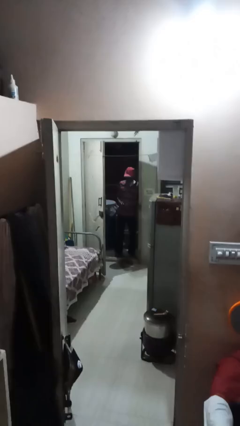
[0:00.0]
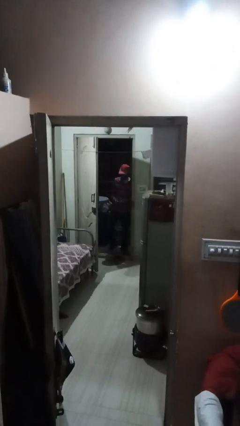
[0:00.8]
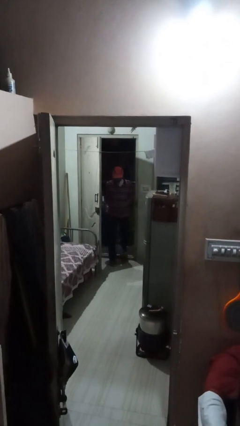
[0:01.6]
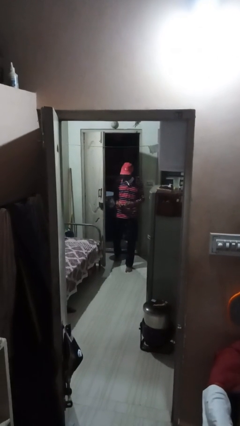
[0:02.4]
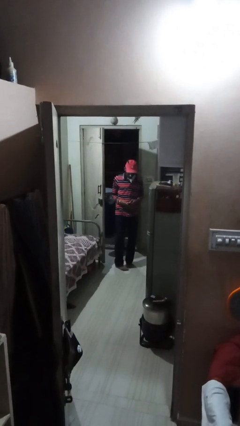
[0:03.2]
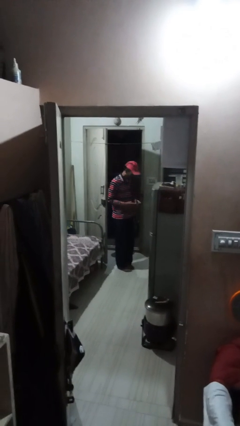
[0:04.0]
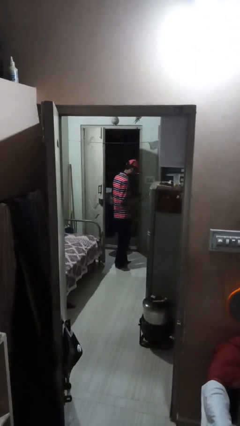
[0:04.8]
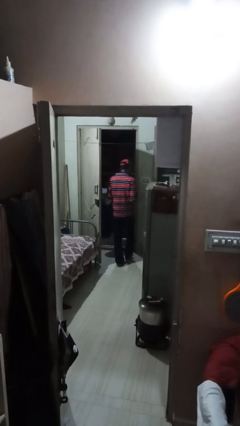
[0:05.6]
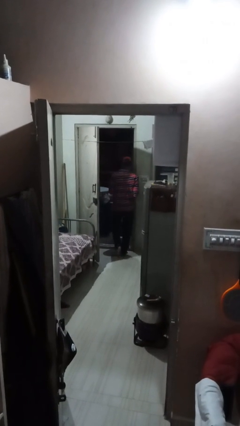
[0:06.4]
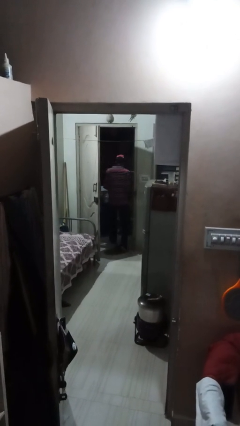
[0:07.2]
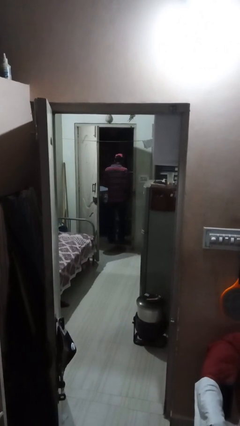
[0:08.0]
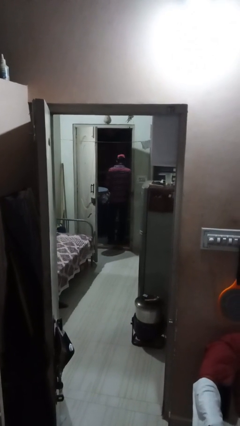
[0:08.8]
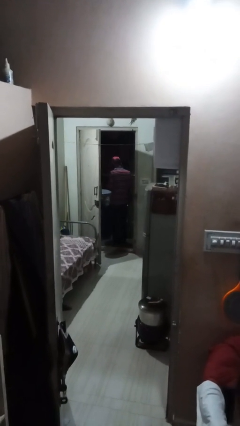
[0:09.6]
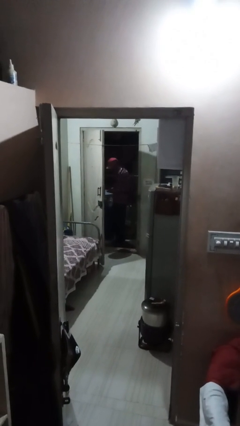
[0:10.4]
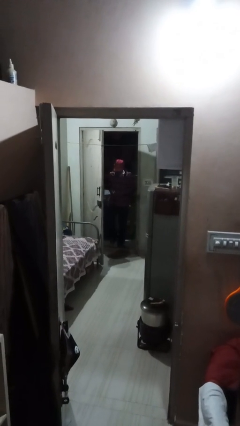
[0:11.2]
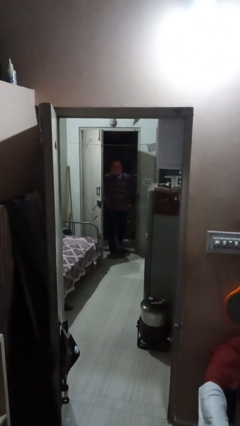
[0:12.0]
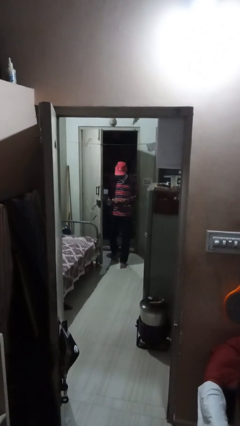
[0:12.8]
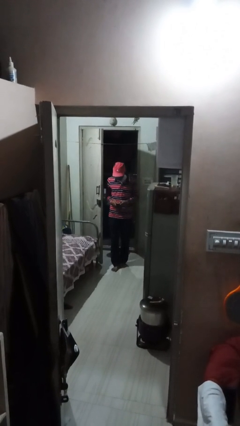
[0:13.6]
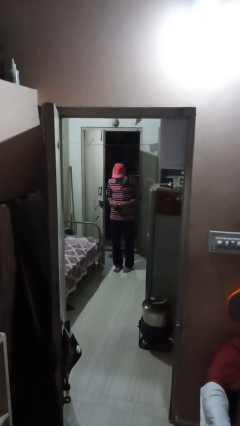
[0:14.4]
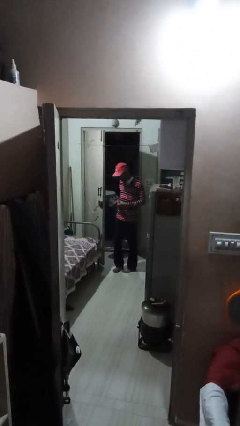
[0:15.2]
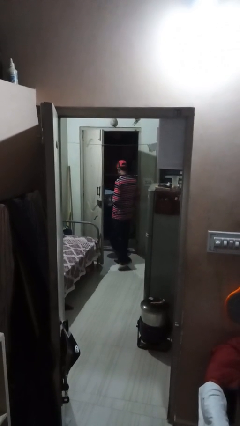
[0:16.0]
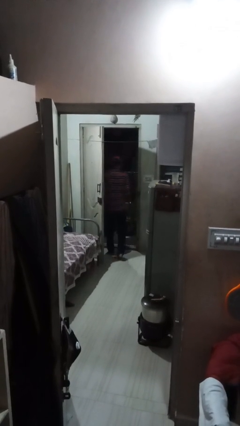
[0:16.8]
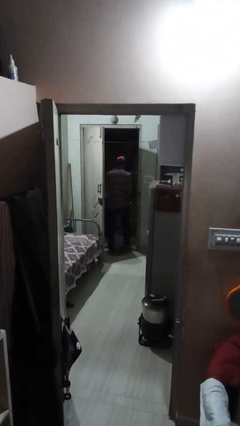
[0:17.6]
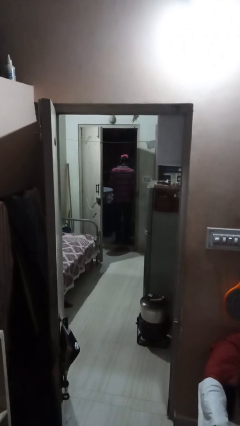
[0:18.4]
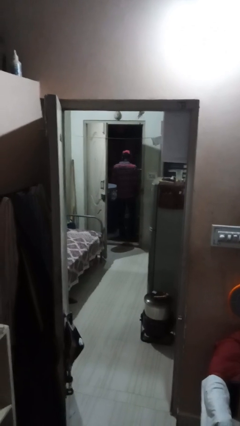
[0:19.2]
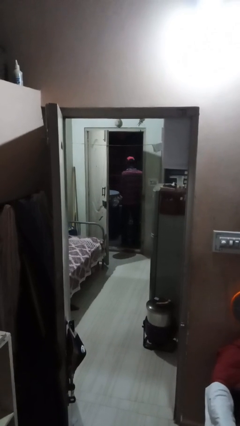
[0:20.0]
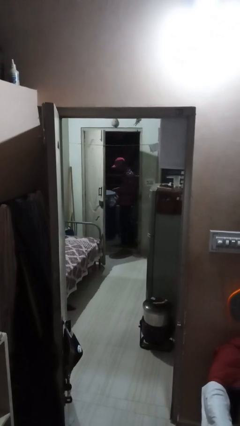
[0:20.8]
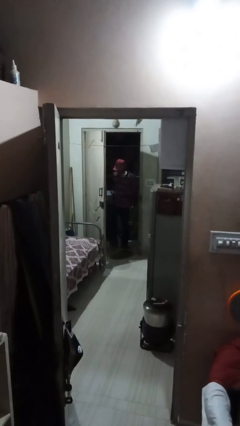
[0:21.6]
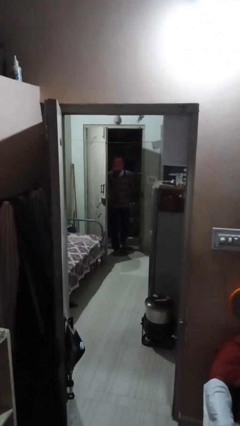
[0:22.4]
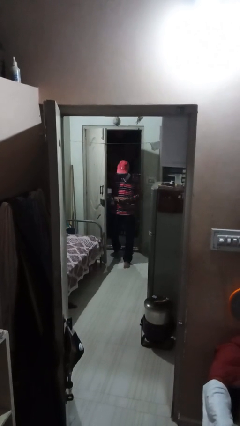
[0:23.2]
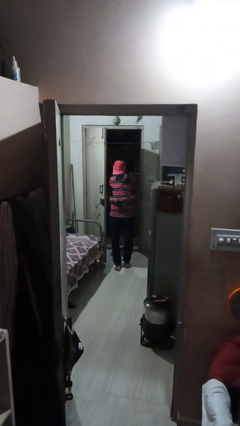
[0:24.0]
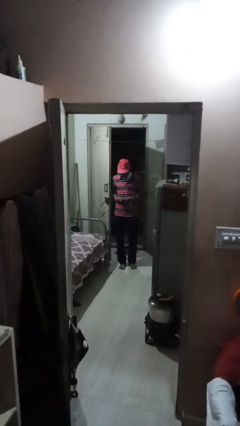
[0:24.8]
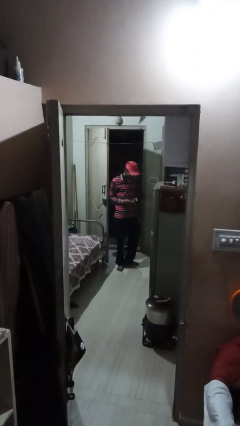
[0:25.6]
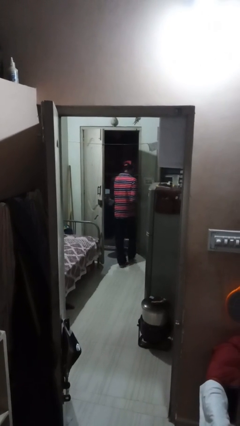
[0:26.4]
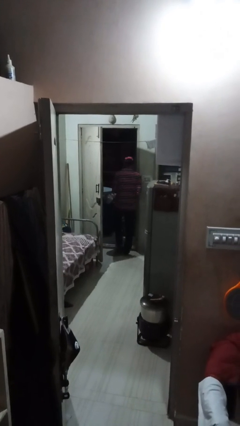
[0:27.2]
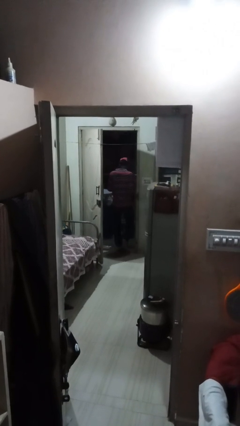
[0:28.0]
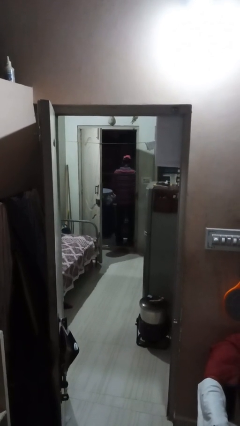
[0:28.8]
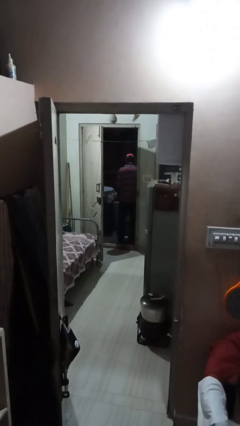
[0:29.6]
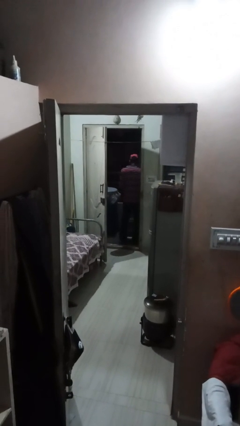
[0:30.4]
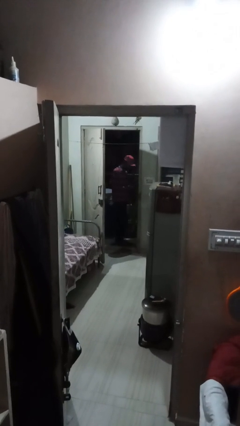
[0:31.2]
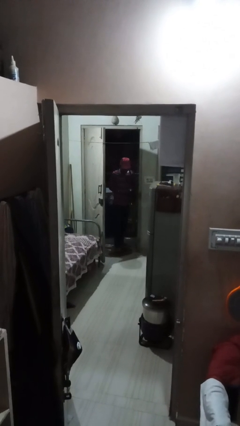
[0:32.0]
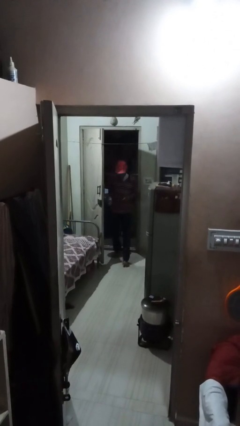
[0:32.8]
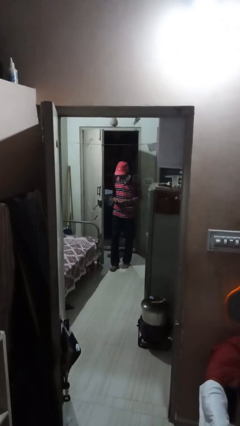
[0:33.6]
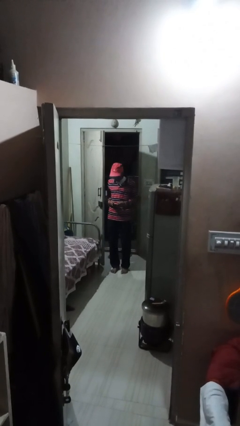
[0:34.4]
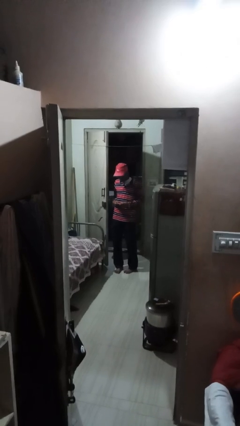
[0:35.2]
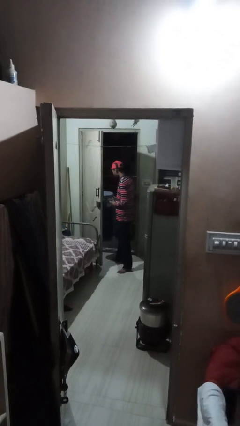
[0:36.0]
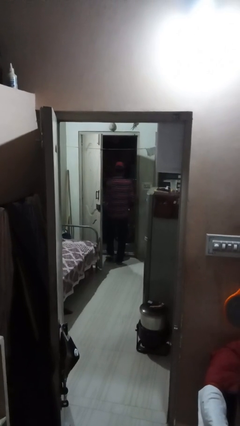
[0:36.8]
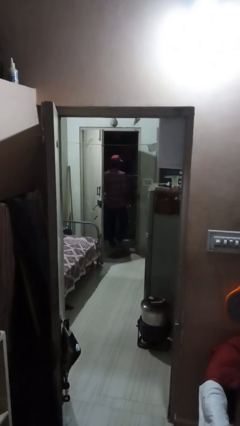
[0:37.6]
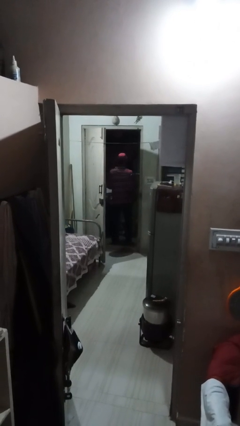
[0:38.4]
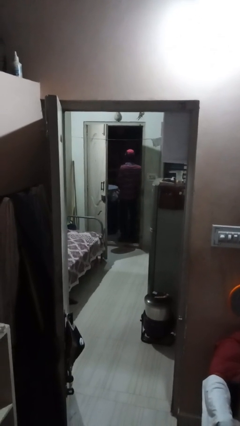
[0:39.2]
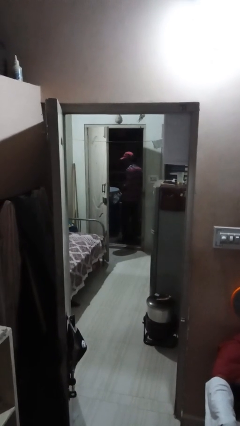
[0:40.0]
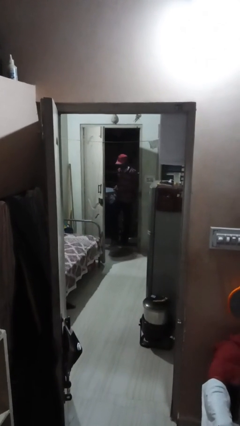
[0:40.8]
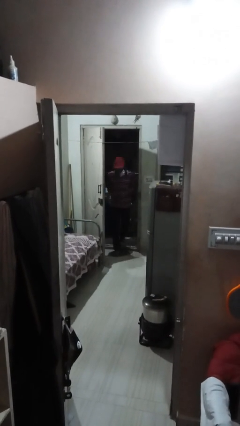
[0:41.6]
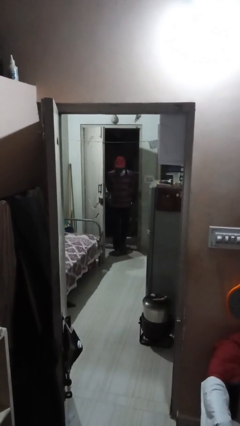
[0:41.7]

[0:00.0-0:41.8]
person texts on phone

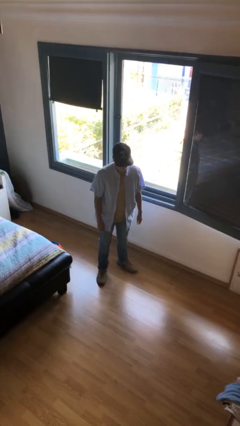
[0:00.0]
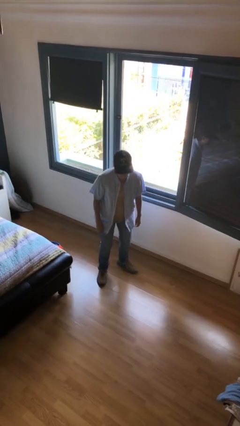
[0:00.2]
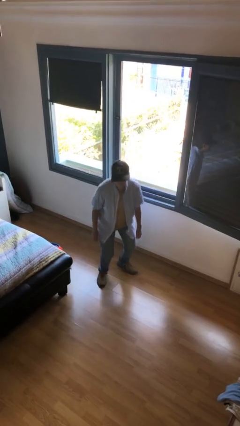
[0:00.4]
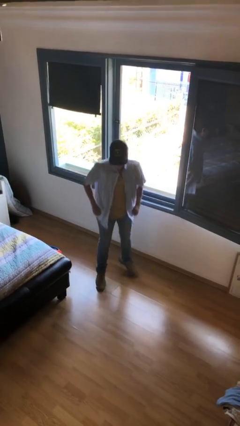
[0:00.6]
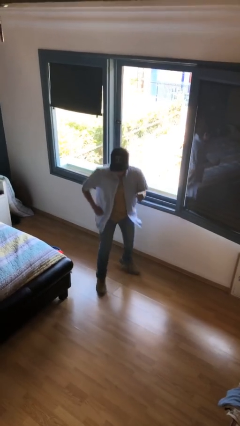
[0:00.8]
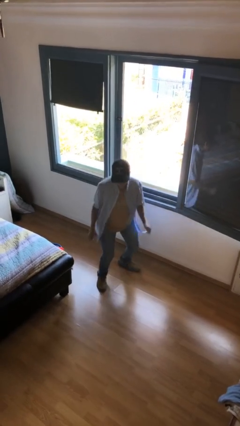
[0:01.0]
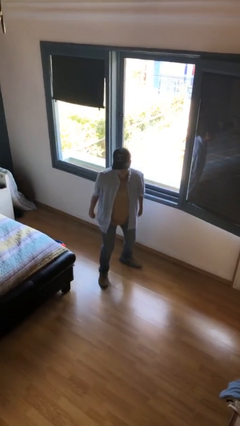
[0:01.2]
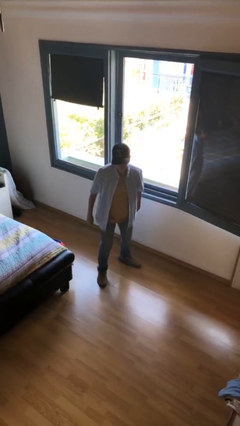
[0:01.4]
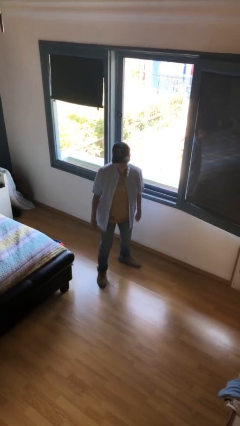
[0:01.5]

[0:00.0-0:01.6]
person jumps

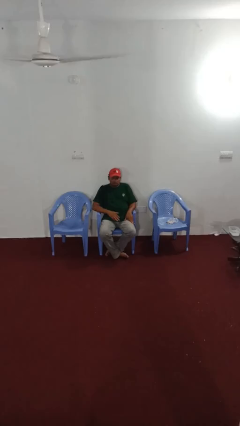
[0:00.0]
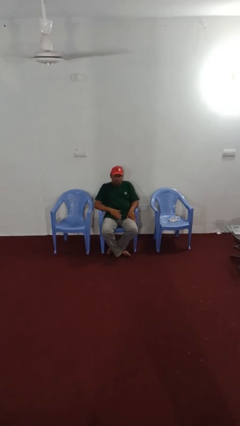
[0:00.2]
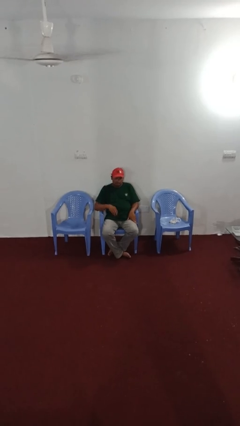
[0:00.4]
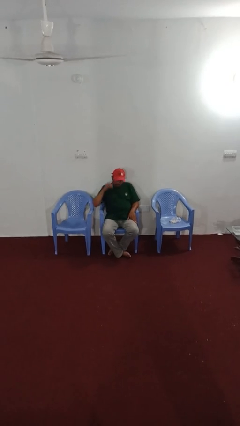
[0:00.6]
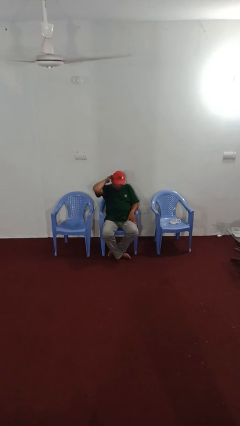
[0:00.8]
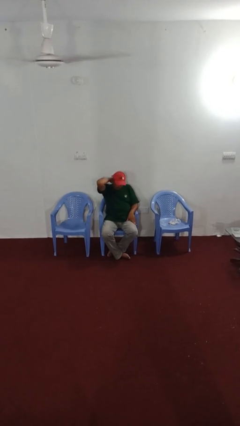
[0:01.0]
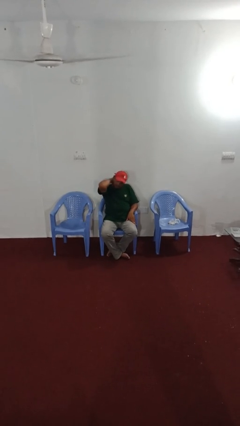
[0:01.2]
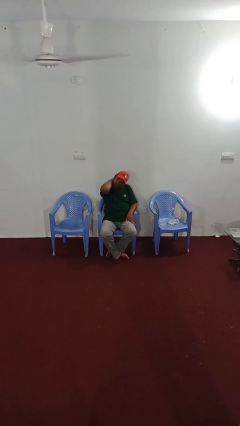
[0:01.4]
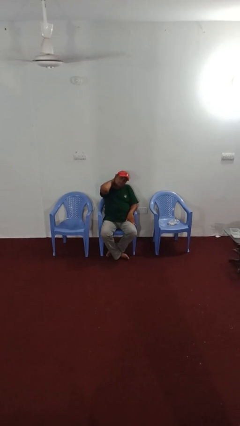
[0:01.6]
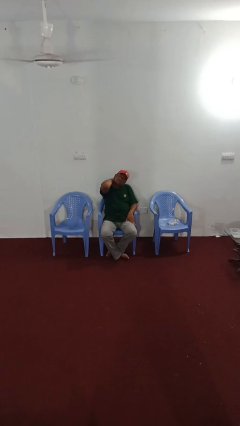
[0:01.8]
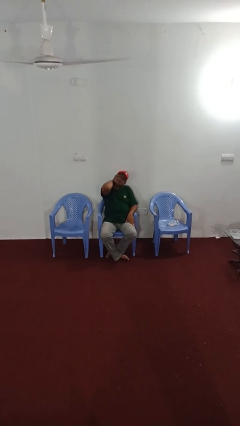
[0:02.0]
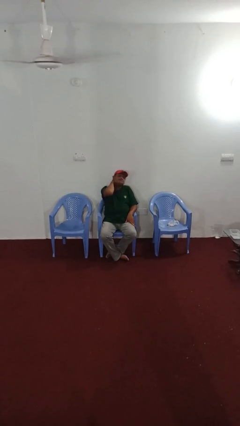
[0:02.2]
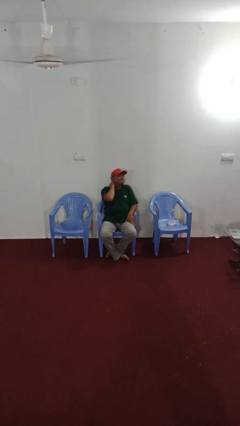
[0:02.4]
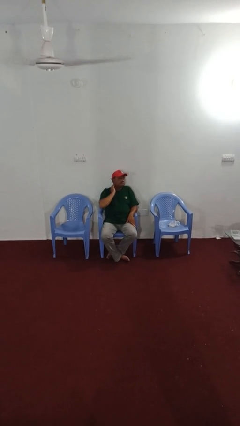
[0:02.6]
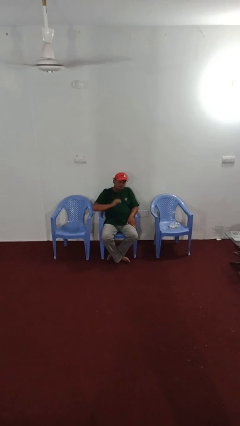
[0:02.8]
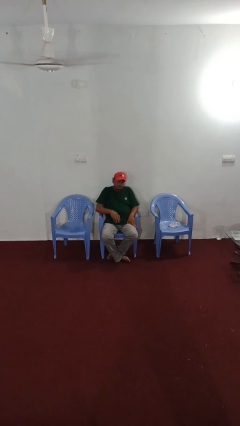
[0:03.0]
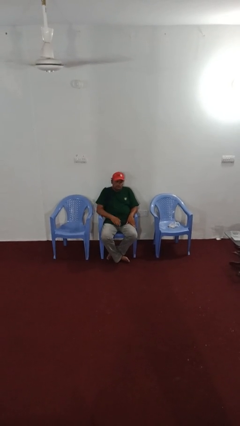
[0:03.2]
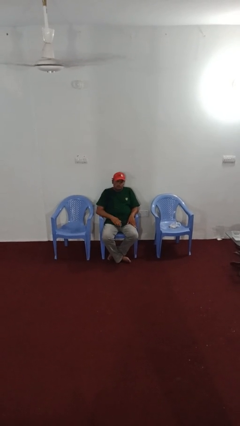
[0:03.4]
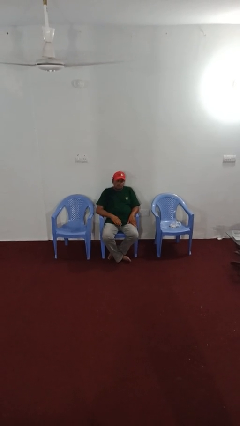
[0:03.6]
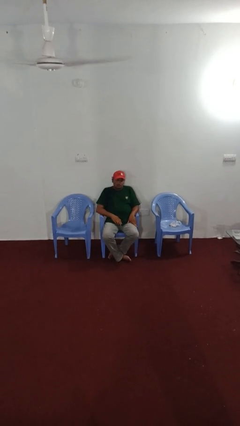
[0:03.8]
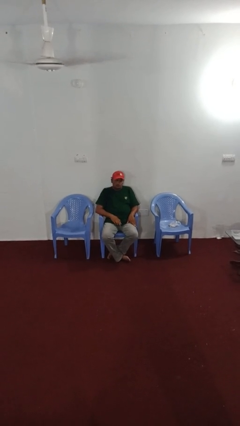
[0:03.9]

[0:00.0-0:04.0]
person rubs neck

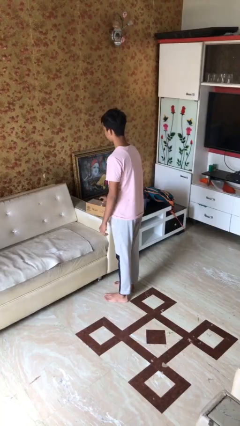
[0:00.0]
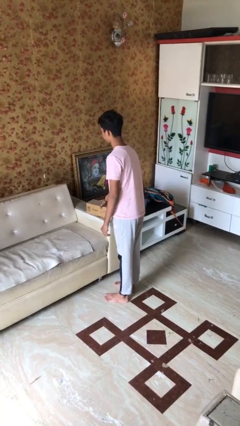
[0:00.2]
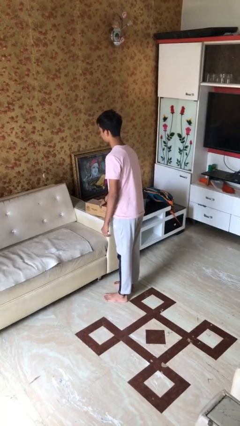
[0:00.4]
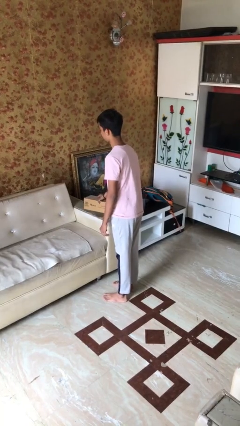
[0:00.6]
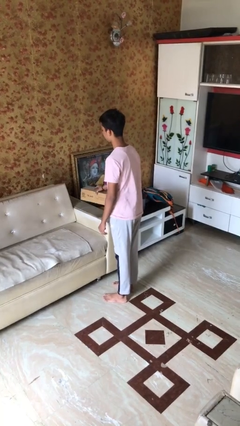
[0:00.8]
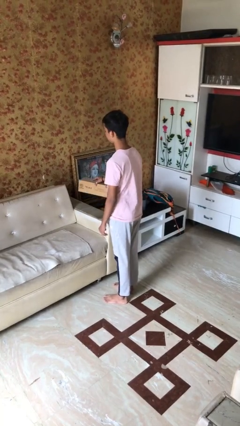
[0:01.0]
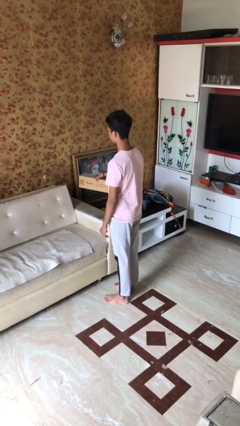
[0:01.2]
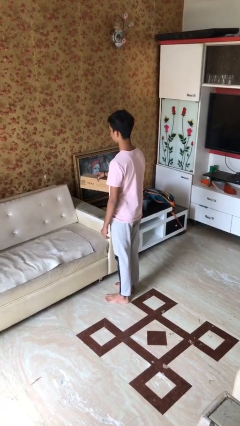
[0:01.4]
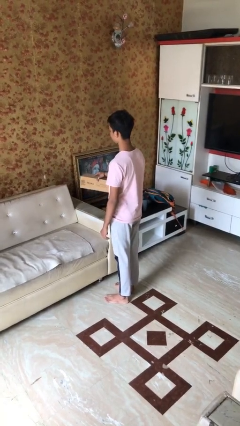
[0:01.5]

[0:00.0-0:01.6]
person picks up object from couch

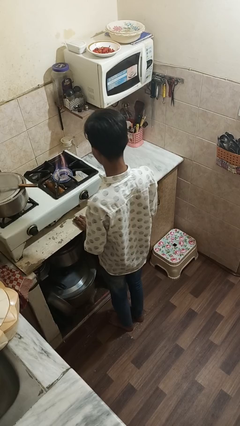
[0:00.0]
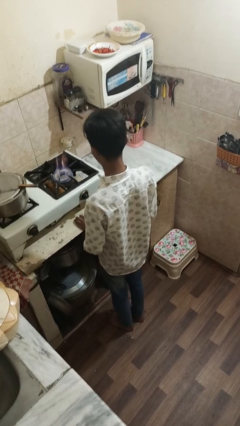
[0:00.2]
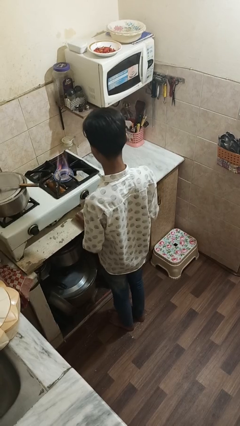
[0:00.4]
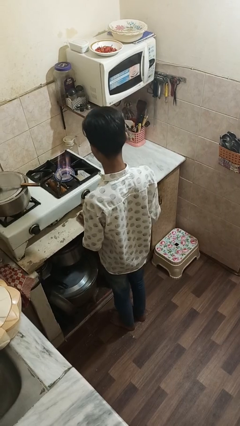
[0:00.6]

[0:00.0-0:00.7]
person turns off stovetop
